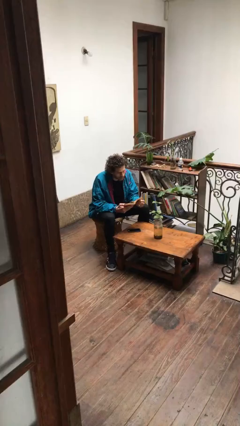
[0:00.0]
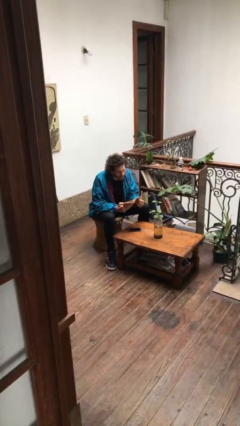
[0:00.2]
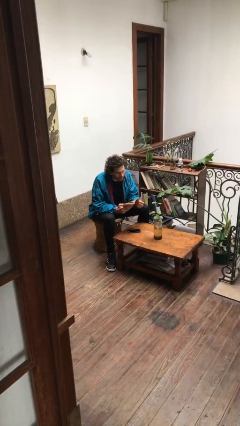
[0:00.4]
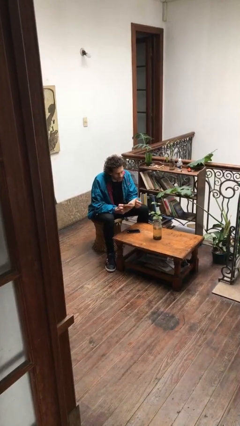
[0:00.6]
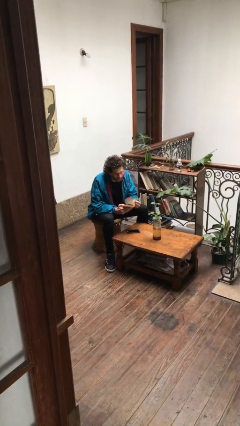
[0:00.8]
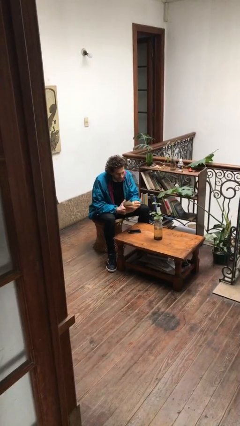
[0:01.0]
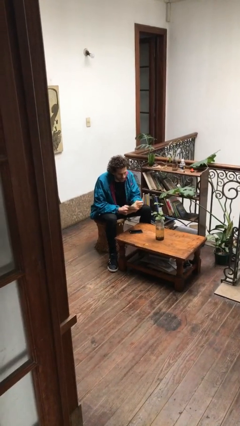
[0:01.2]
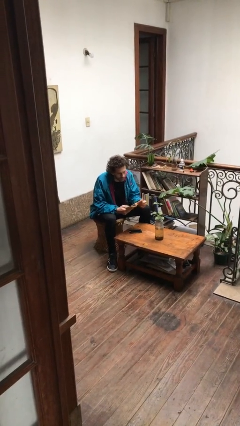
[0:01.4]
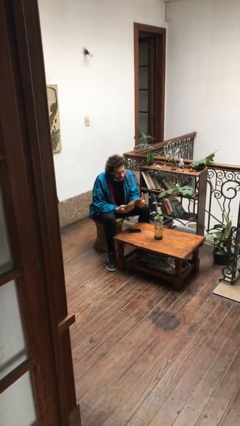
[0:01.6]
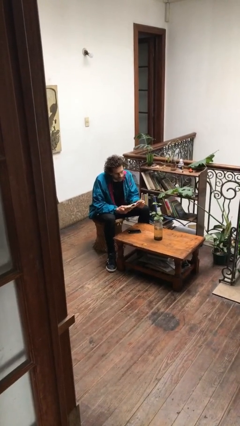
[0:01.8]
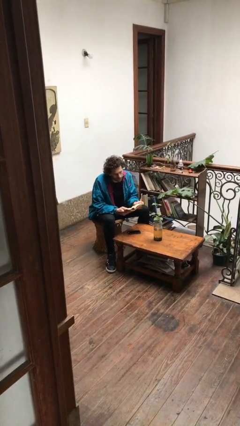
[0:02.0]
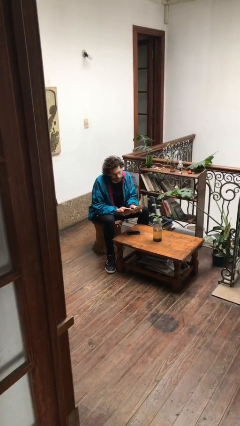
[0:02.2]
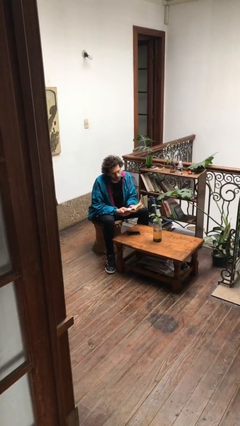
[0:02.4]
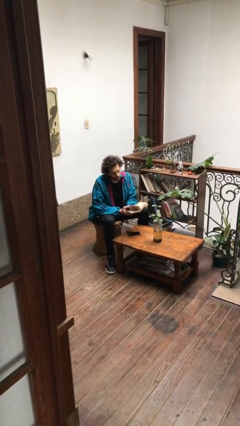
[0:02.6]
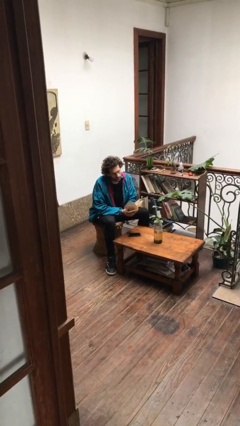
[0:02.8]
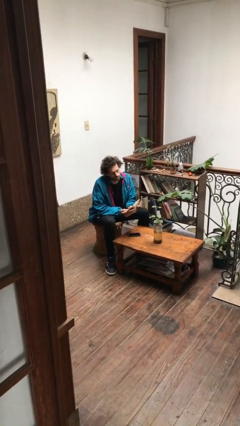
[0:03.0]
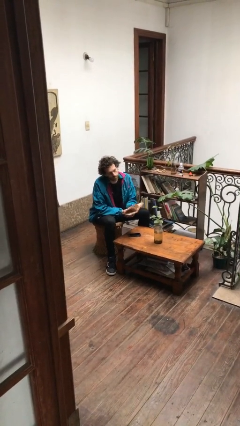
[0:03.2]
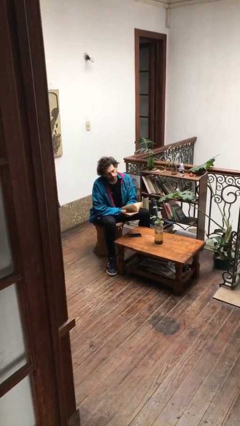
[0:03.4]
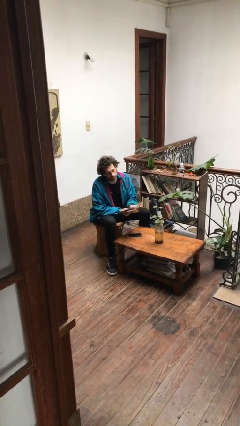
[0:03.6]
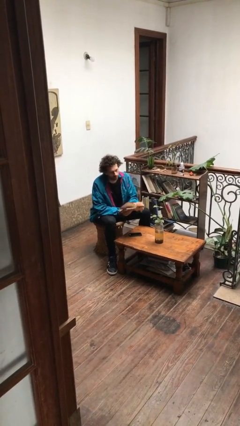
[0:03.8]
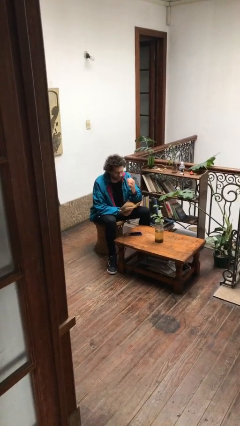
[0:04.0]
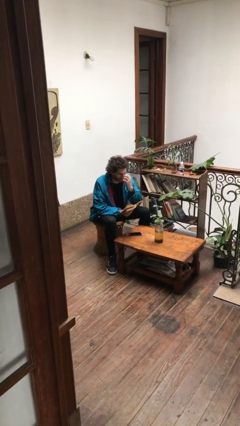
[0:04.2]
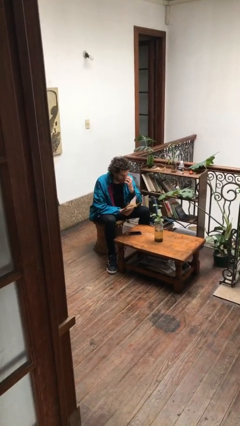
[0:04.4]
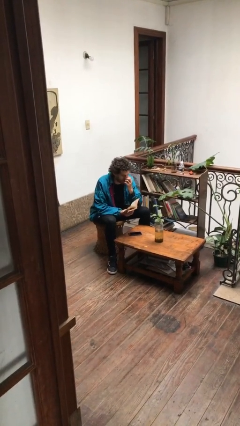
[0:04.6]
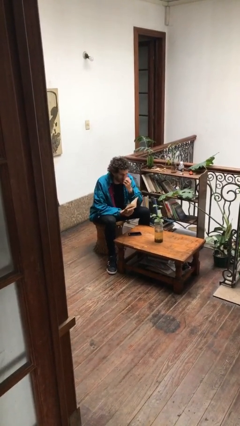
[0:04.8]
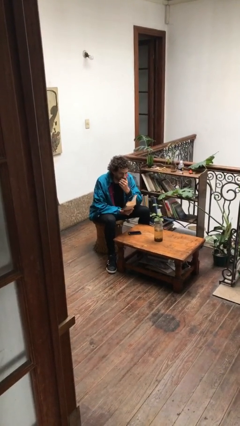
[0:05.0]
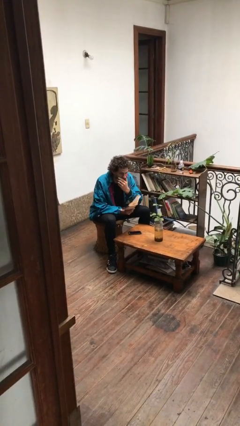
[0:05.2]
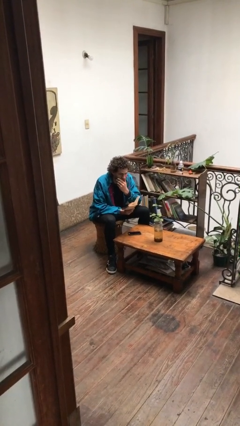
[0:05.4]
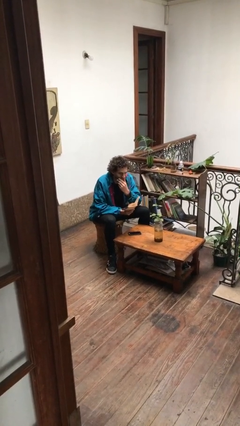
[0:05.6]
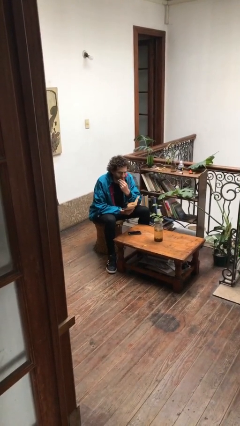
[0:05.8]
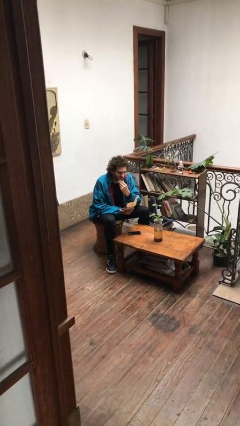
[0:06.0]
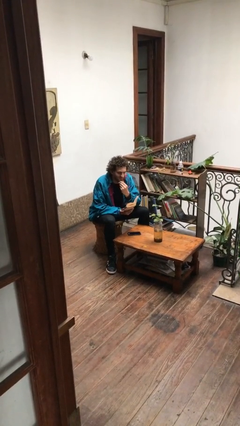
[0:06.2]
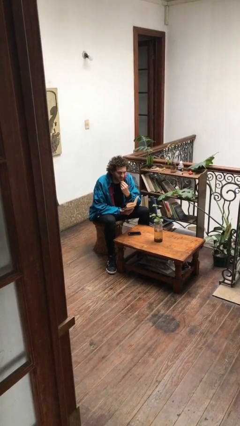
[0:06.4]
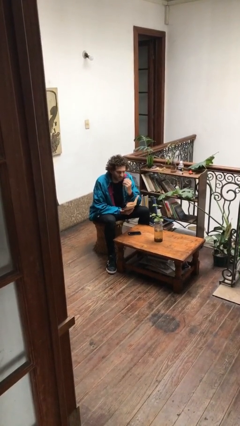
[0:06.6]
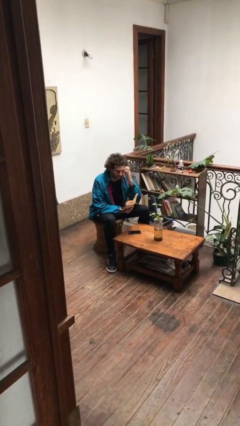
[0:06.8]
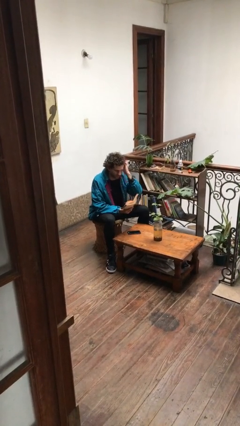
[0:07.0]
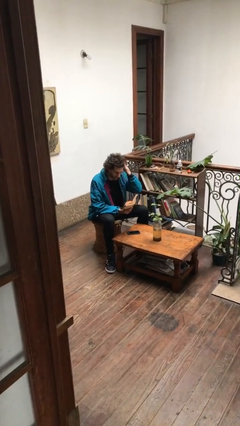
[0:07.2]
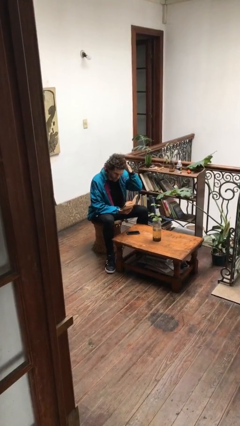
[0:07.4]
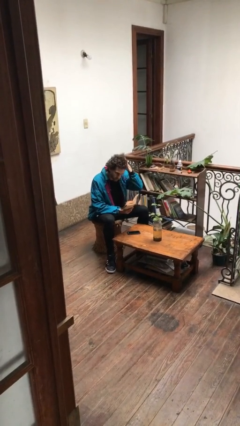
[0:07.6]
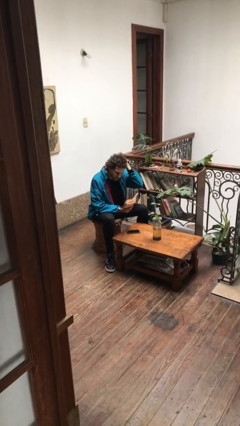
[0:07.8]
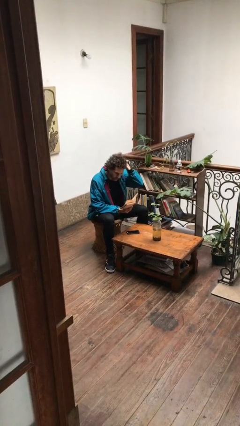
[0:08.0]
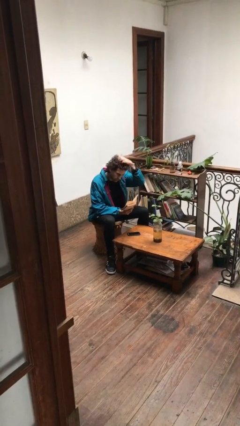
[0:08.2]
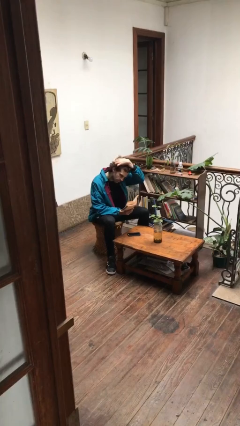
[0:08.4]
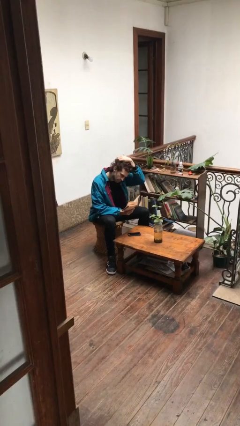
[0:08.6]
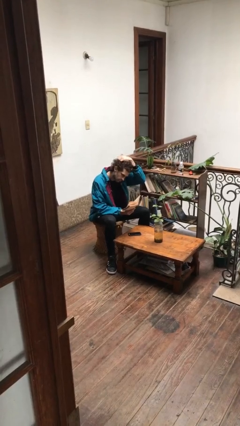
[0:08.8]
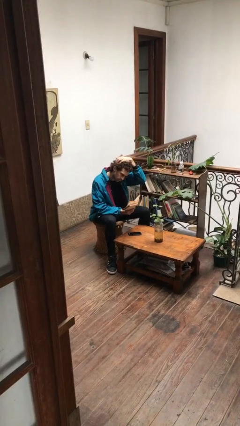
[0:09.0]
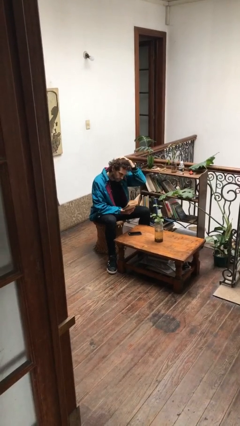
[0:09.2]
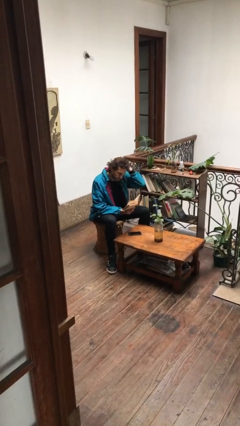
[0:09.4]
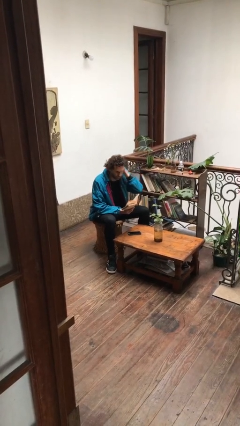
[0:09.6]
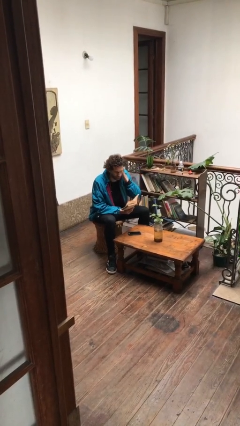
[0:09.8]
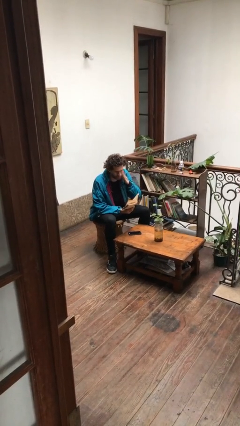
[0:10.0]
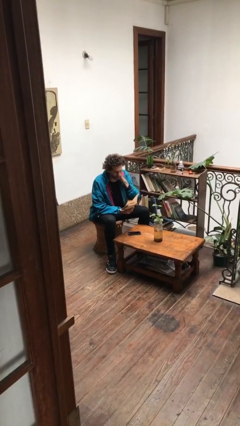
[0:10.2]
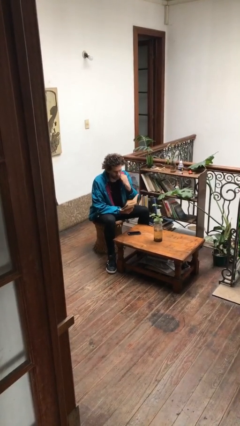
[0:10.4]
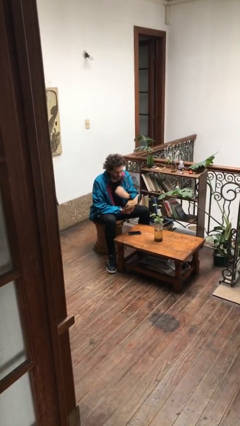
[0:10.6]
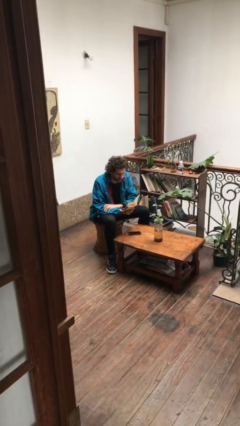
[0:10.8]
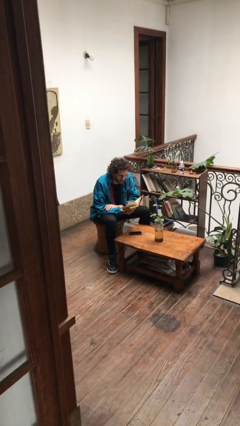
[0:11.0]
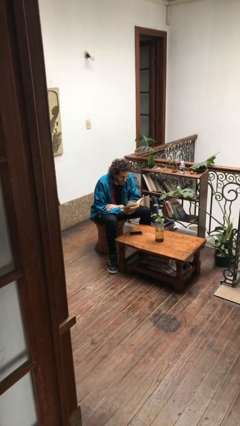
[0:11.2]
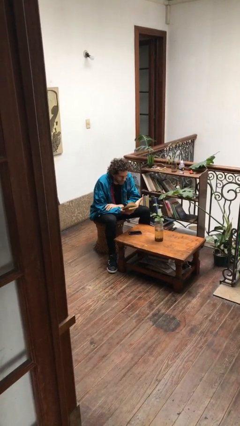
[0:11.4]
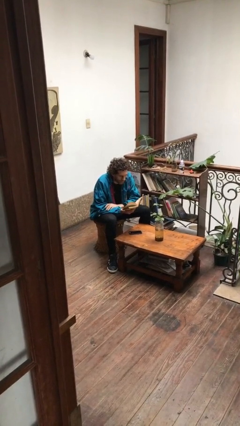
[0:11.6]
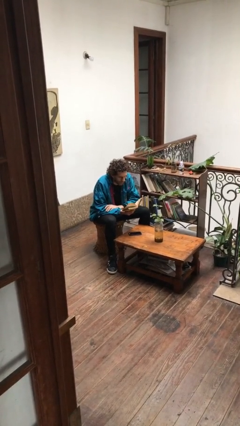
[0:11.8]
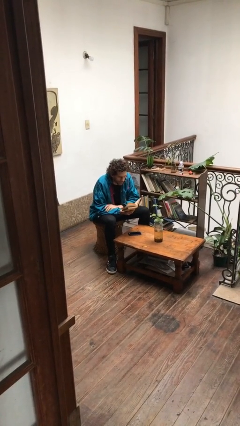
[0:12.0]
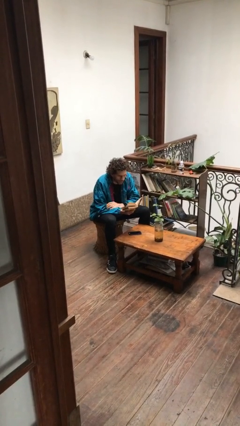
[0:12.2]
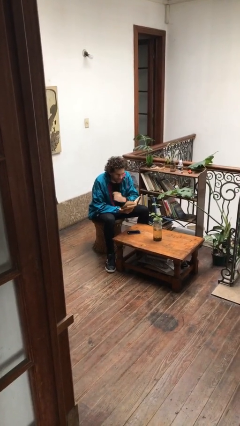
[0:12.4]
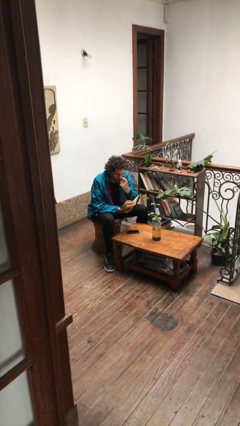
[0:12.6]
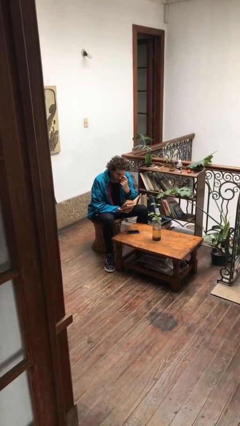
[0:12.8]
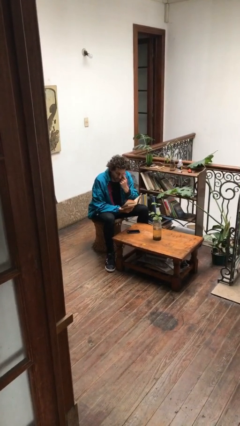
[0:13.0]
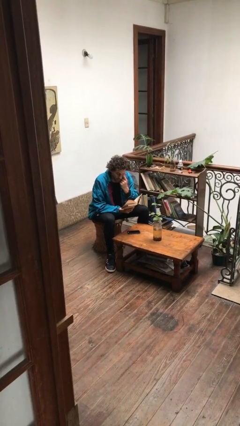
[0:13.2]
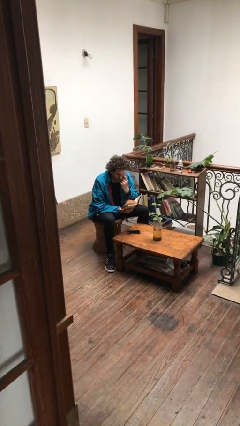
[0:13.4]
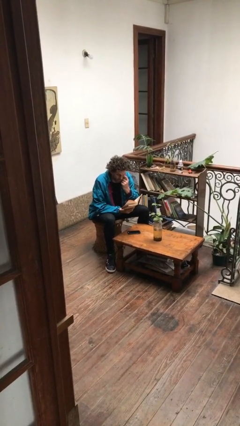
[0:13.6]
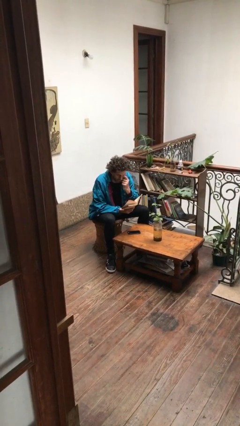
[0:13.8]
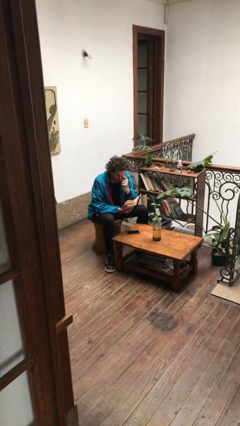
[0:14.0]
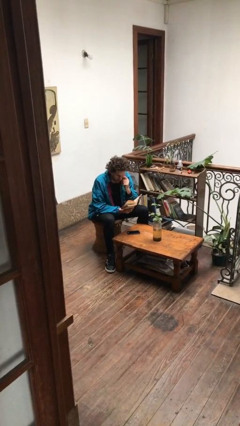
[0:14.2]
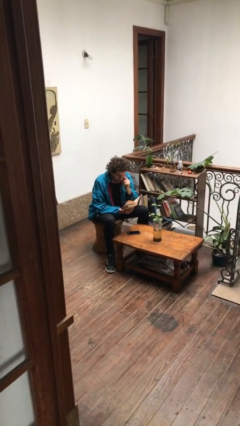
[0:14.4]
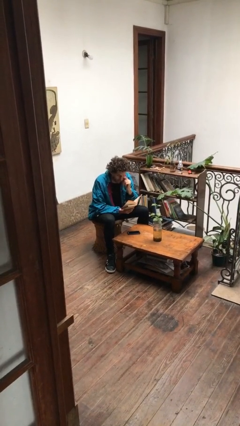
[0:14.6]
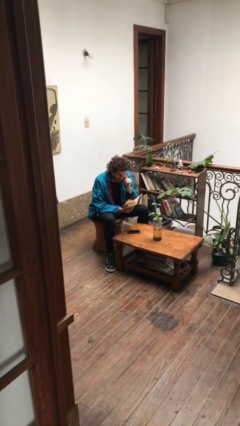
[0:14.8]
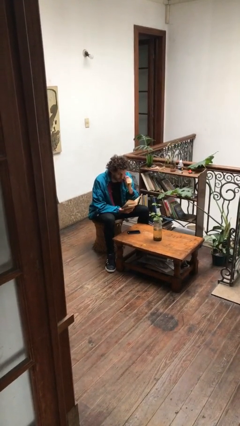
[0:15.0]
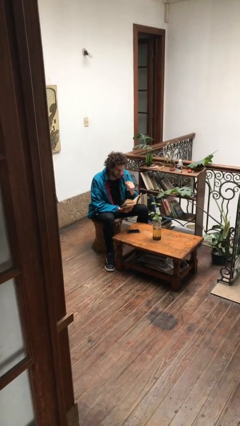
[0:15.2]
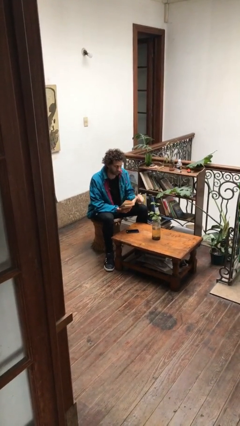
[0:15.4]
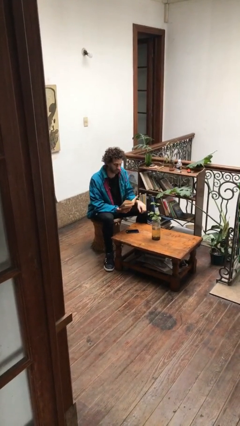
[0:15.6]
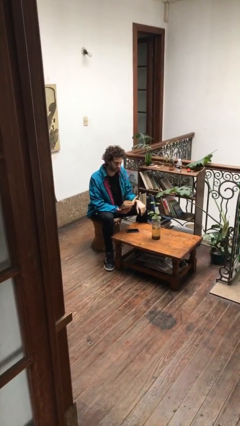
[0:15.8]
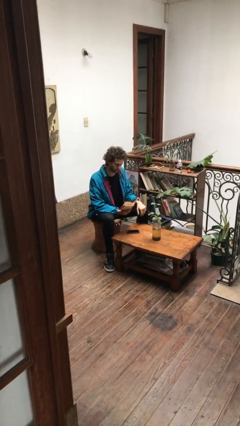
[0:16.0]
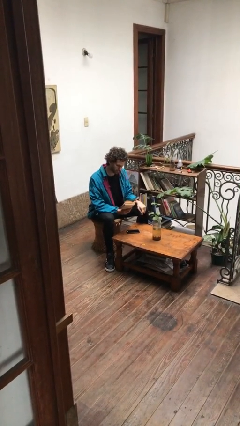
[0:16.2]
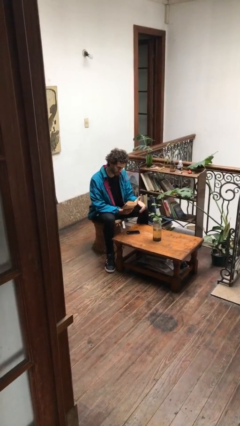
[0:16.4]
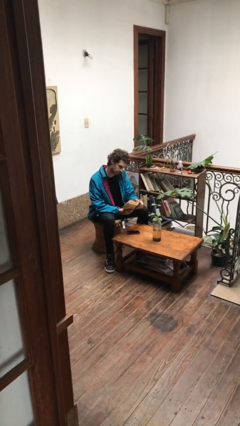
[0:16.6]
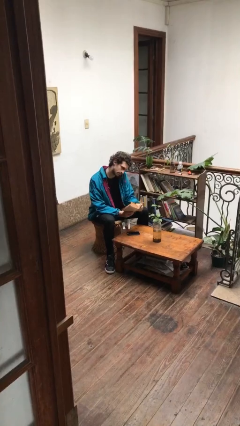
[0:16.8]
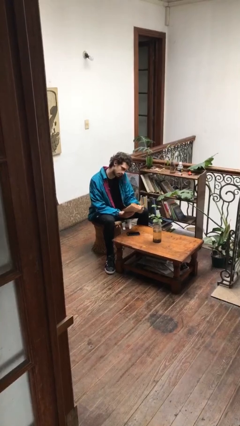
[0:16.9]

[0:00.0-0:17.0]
person reads document

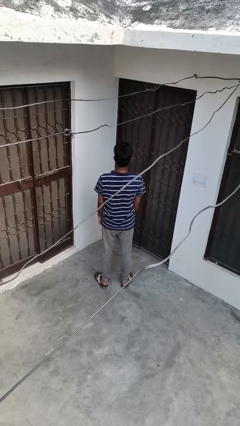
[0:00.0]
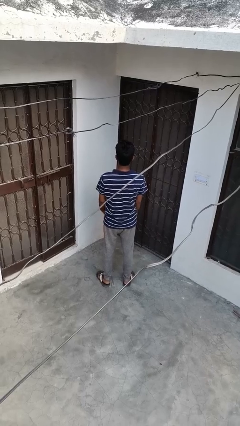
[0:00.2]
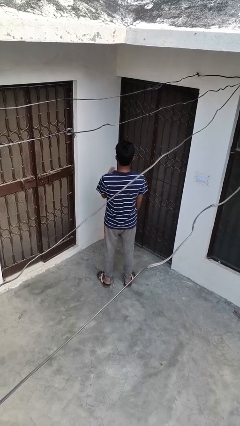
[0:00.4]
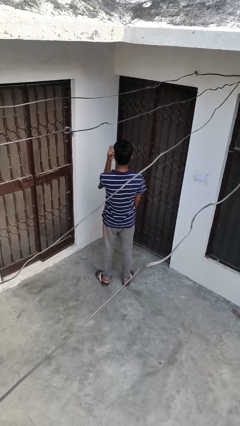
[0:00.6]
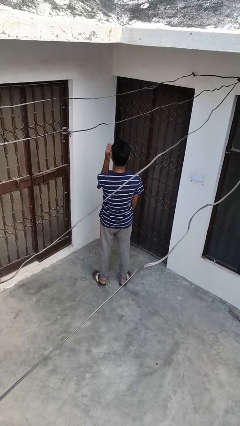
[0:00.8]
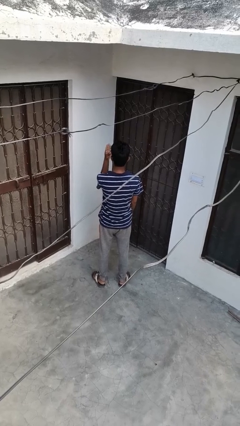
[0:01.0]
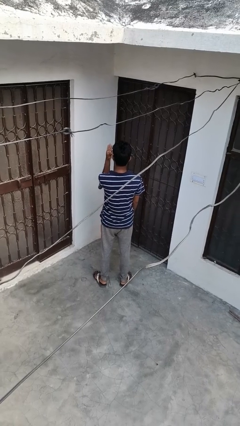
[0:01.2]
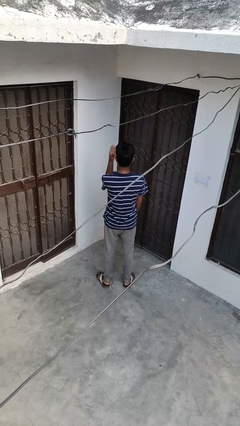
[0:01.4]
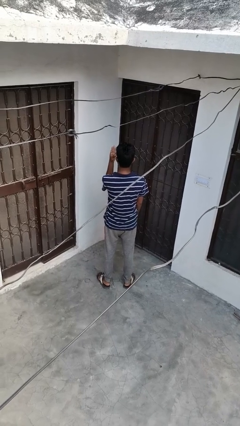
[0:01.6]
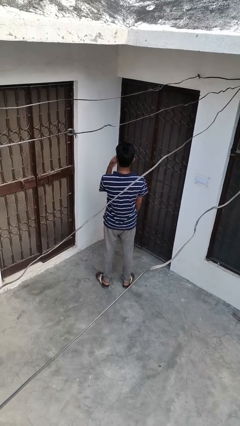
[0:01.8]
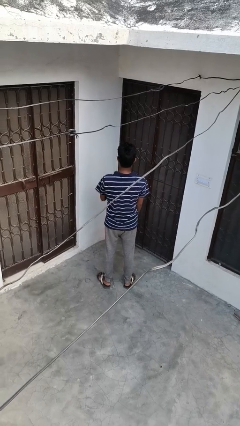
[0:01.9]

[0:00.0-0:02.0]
person gestures number four
